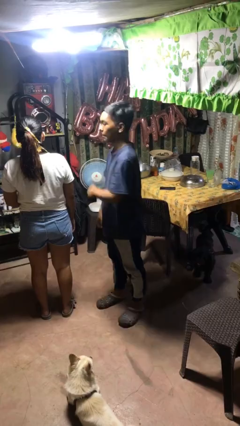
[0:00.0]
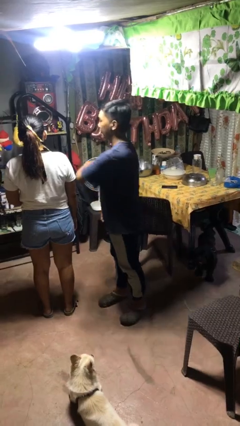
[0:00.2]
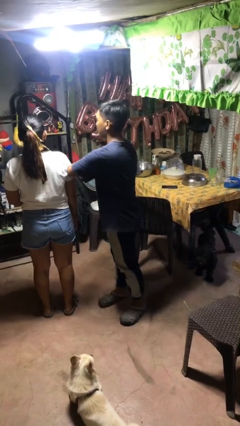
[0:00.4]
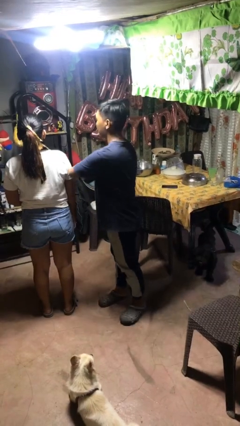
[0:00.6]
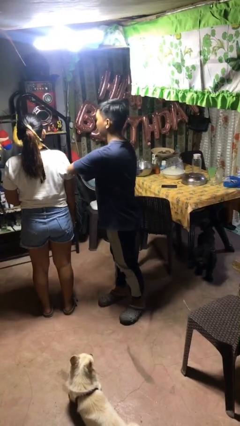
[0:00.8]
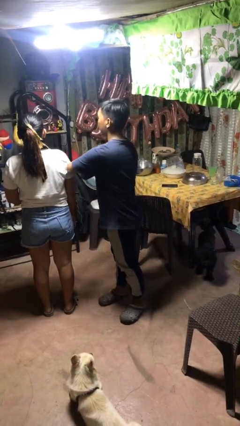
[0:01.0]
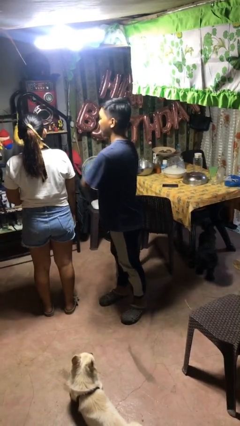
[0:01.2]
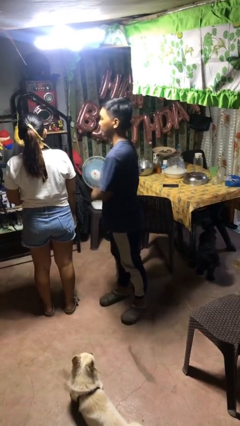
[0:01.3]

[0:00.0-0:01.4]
person nudges person with elbow

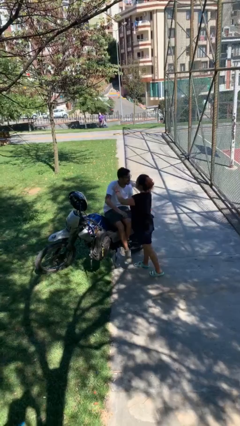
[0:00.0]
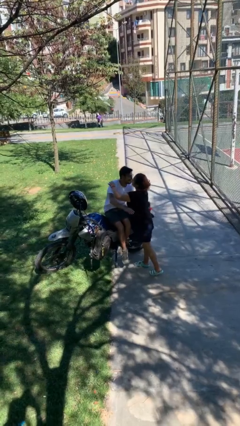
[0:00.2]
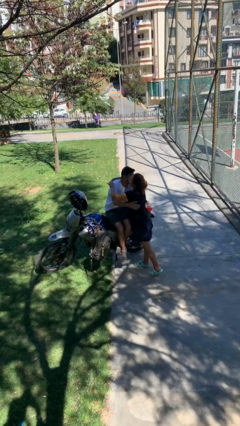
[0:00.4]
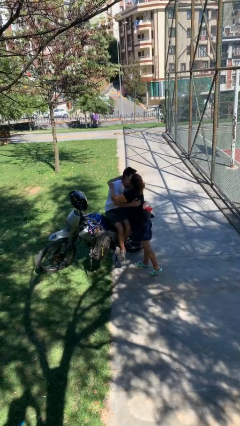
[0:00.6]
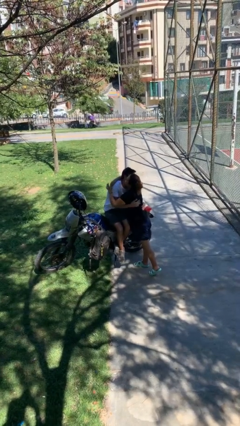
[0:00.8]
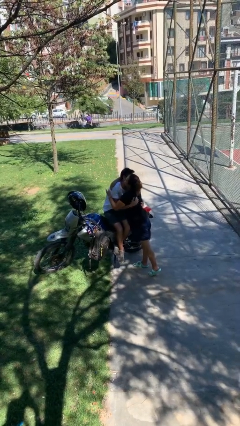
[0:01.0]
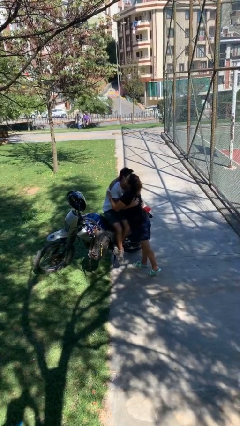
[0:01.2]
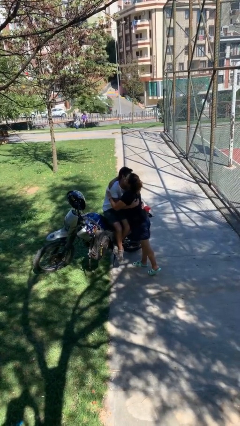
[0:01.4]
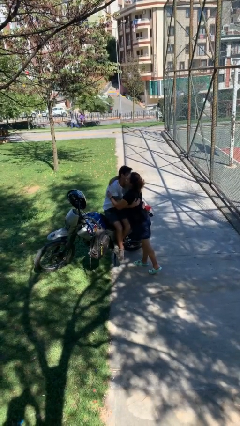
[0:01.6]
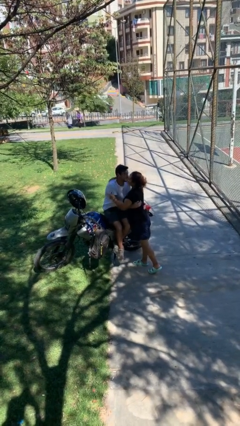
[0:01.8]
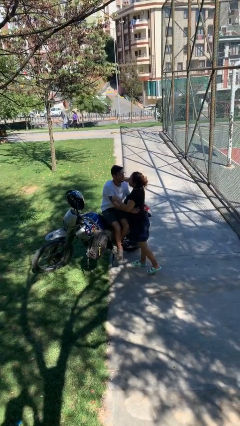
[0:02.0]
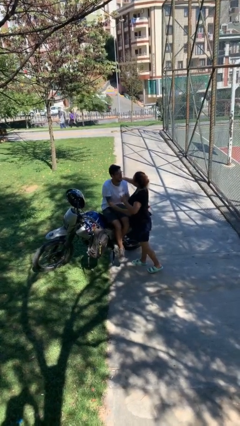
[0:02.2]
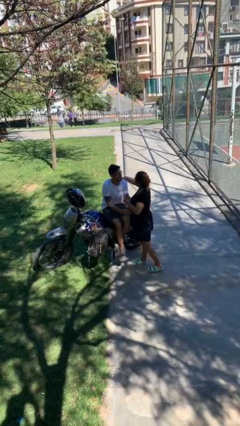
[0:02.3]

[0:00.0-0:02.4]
person embraces person

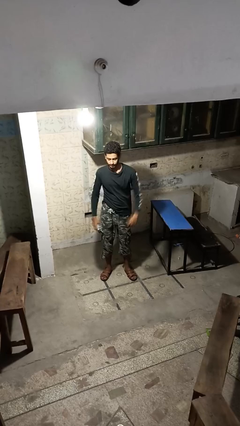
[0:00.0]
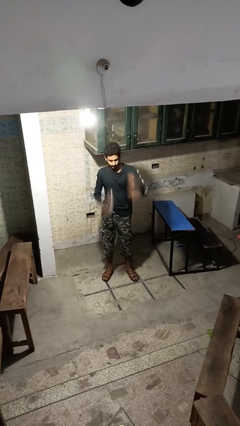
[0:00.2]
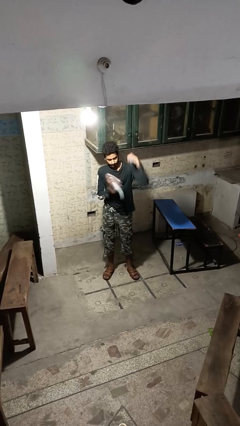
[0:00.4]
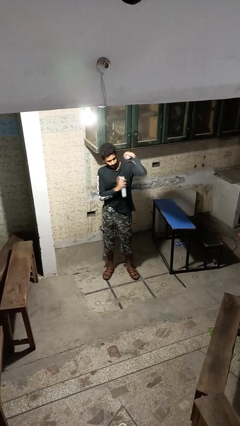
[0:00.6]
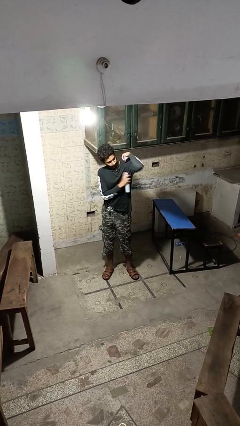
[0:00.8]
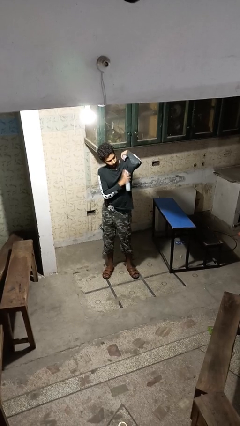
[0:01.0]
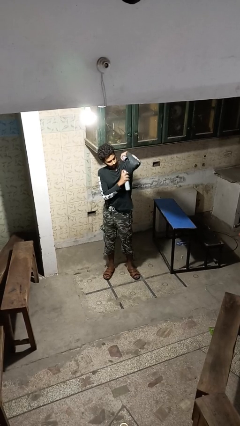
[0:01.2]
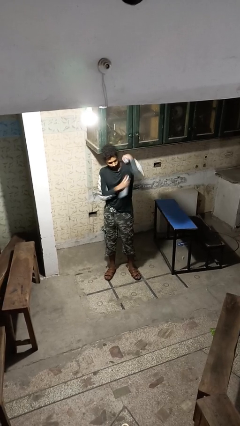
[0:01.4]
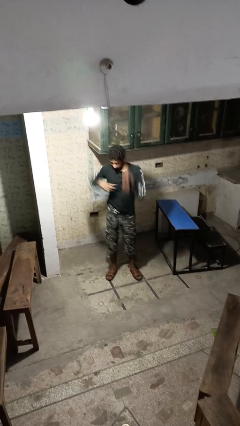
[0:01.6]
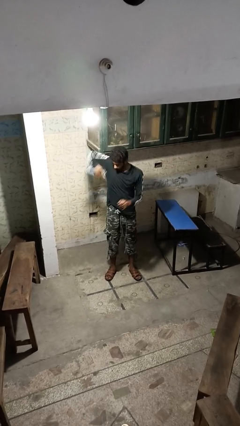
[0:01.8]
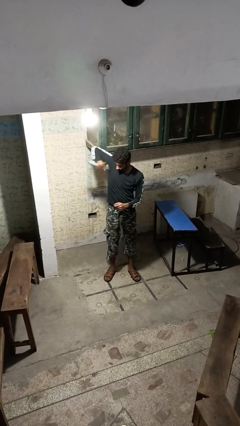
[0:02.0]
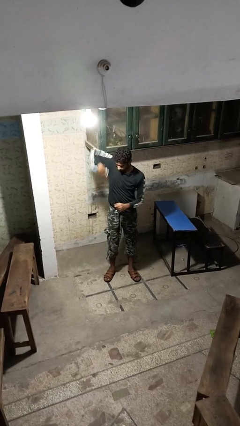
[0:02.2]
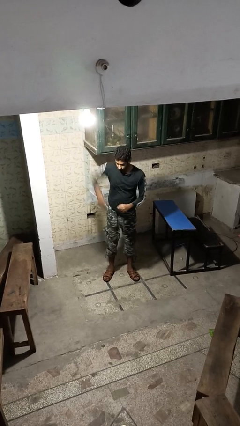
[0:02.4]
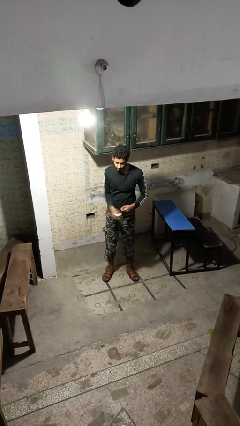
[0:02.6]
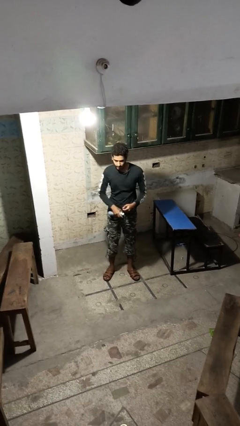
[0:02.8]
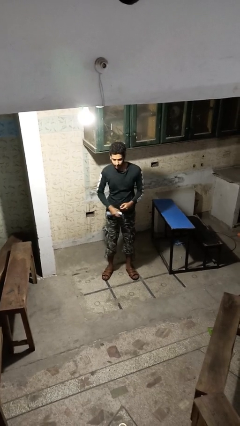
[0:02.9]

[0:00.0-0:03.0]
person applies deodorant

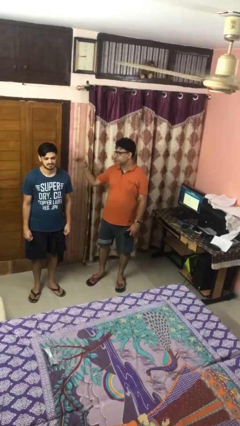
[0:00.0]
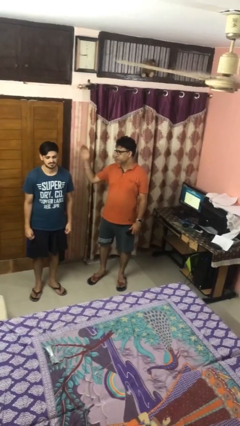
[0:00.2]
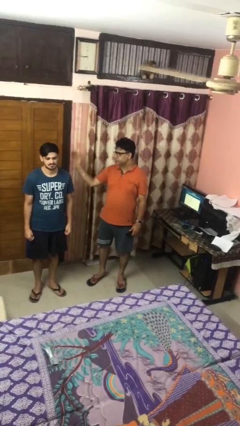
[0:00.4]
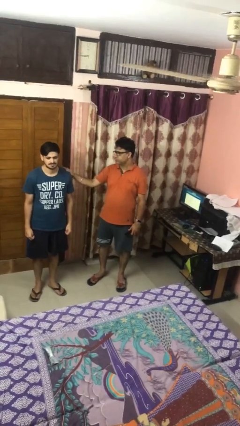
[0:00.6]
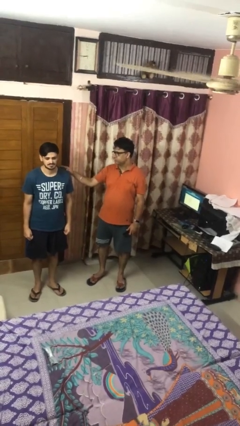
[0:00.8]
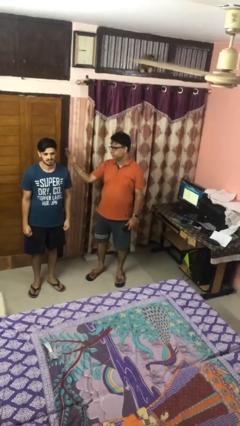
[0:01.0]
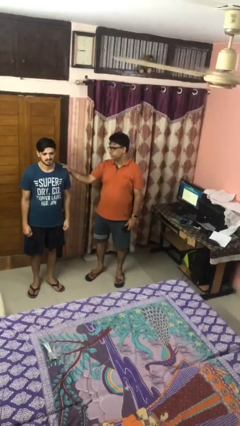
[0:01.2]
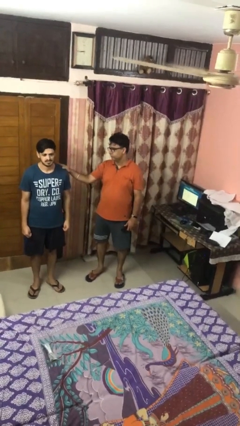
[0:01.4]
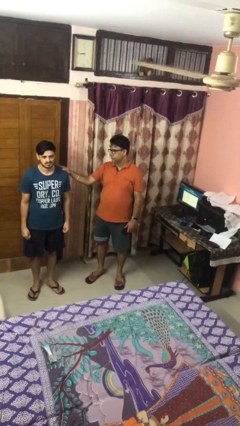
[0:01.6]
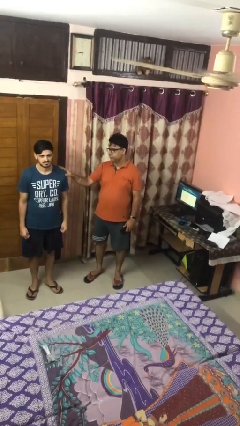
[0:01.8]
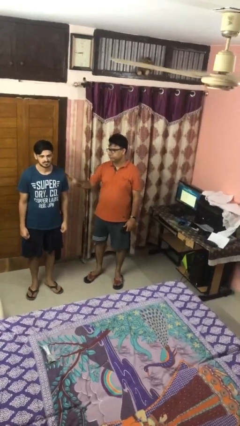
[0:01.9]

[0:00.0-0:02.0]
person pounds shoulders of person

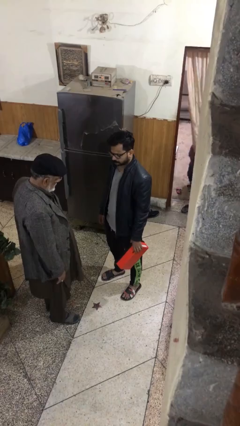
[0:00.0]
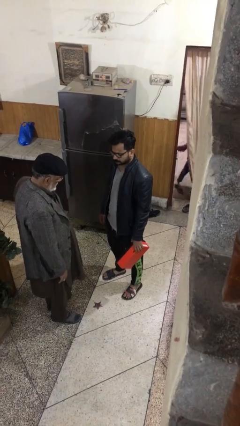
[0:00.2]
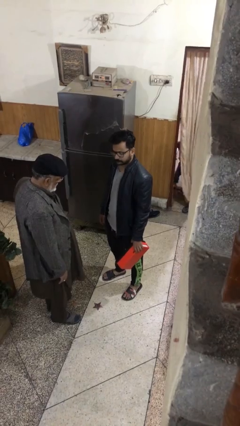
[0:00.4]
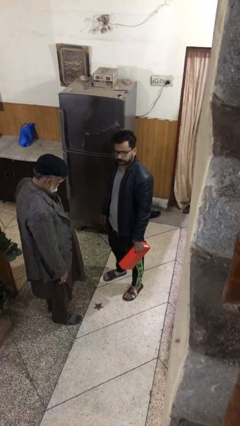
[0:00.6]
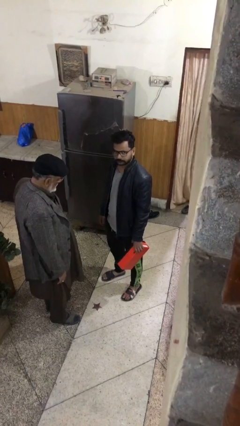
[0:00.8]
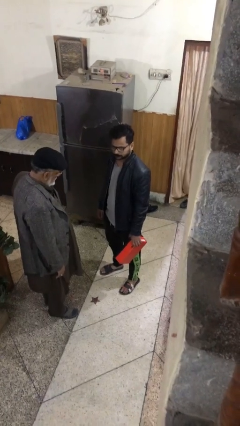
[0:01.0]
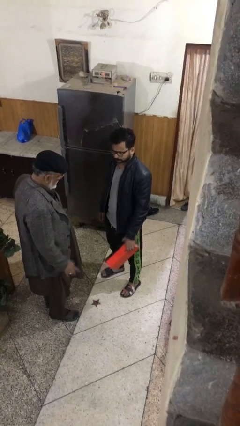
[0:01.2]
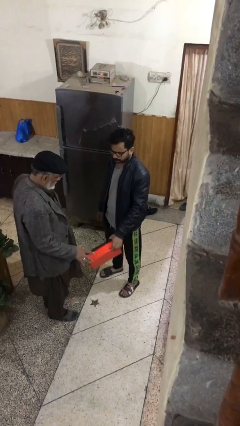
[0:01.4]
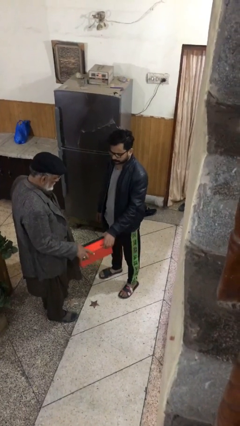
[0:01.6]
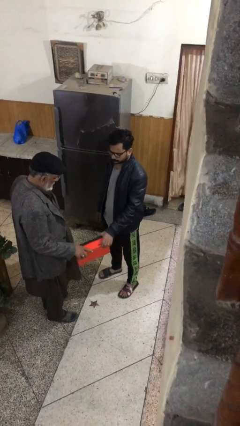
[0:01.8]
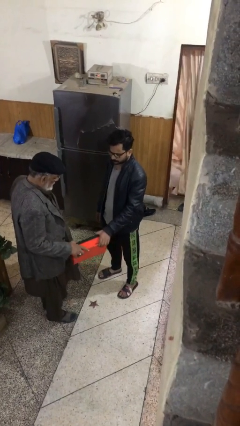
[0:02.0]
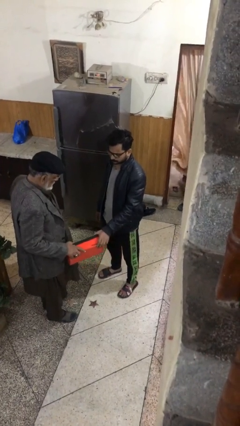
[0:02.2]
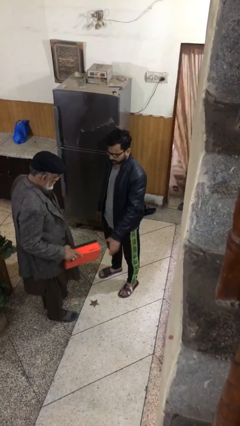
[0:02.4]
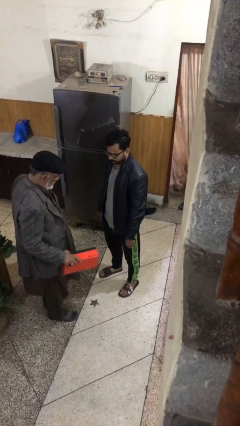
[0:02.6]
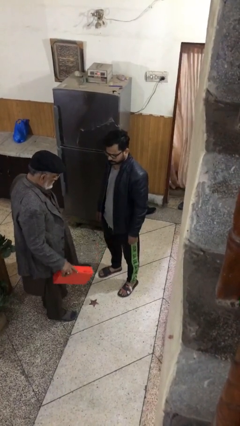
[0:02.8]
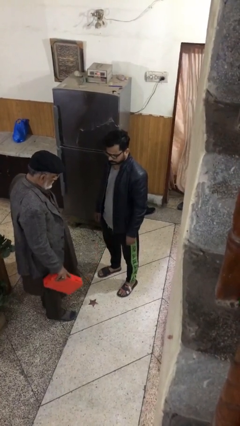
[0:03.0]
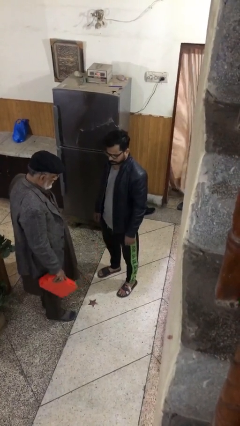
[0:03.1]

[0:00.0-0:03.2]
person transfers object to person

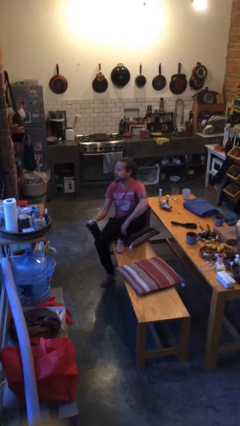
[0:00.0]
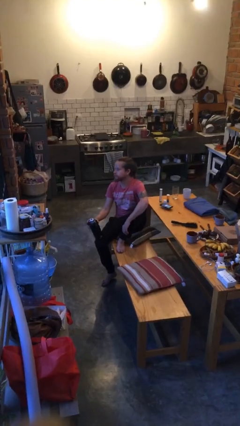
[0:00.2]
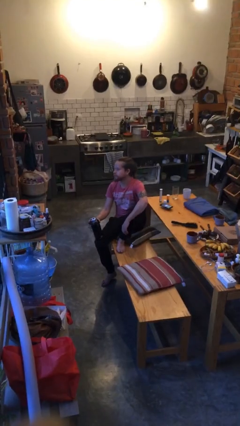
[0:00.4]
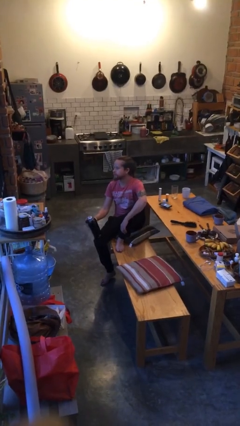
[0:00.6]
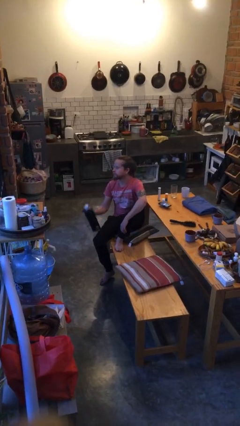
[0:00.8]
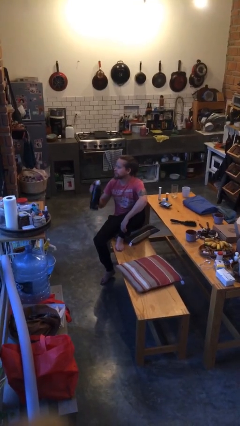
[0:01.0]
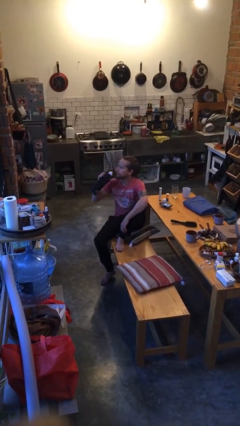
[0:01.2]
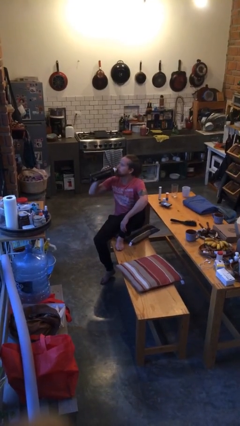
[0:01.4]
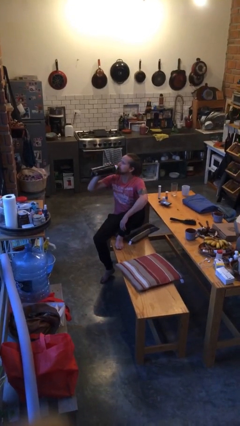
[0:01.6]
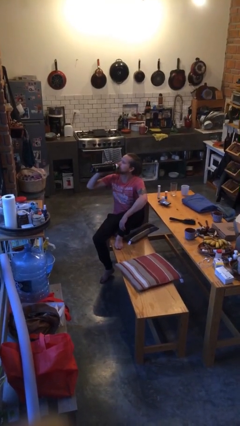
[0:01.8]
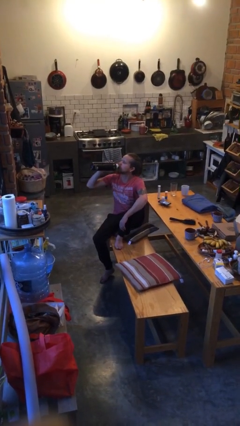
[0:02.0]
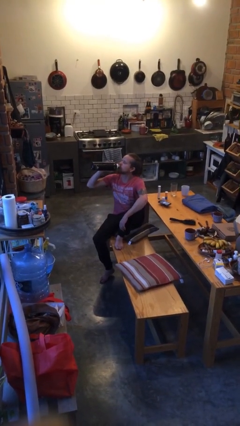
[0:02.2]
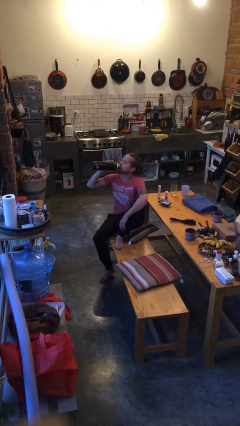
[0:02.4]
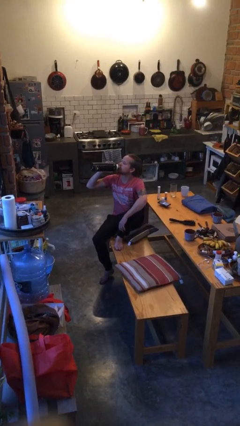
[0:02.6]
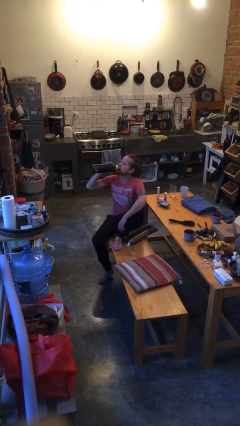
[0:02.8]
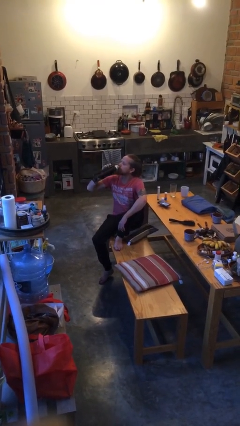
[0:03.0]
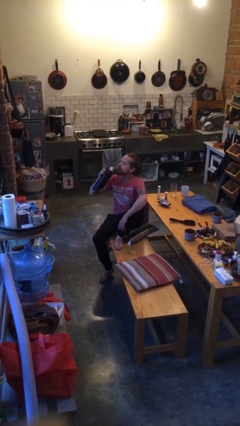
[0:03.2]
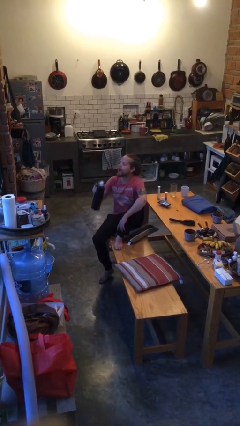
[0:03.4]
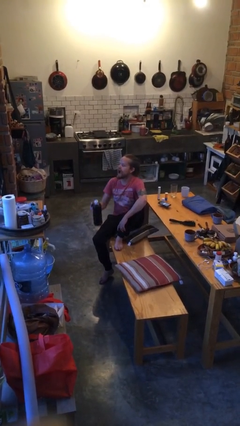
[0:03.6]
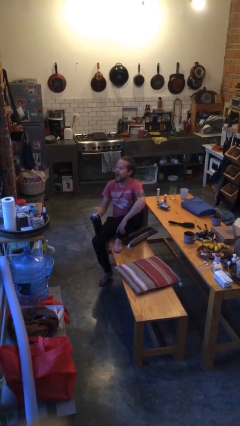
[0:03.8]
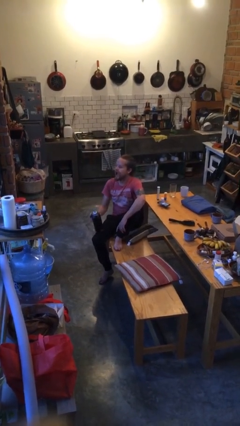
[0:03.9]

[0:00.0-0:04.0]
person drinks from bottle

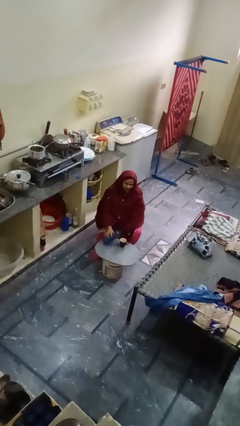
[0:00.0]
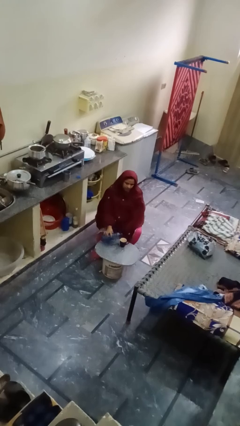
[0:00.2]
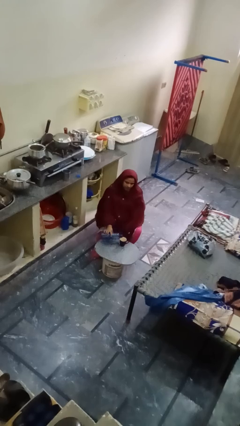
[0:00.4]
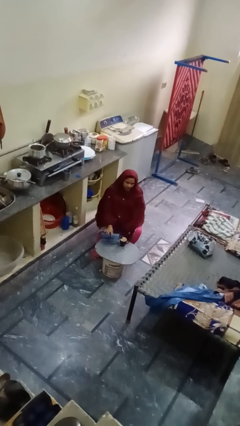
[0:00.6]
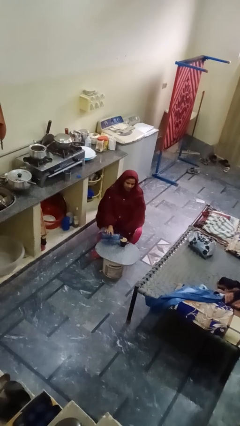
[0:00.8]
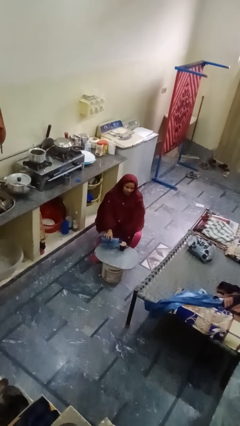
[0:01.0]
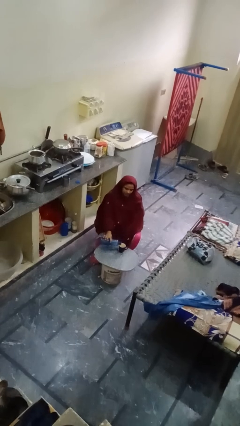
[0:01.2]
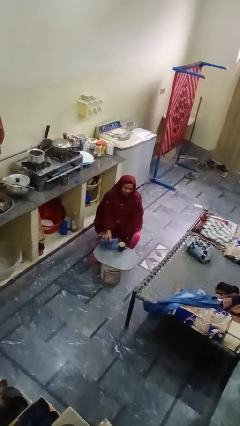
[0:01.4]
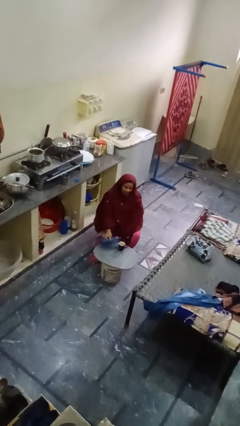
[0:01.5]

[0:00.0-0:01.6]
person pours liquid into cup
